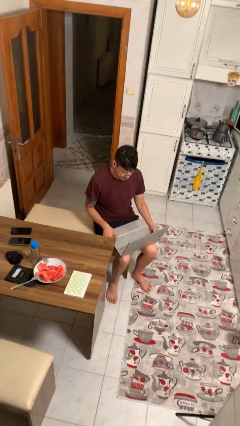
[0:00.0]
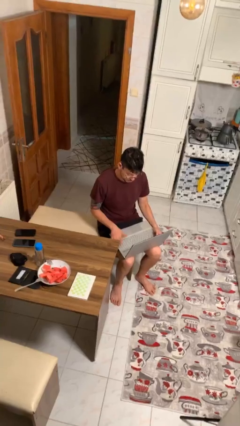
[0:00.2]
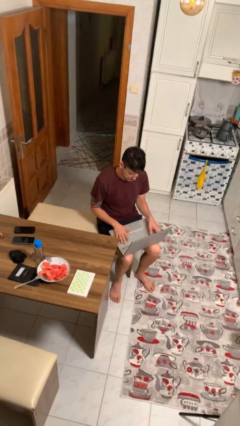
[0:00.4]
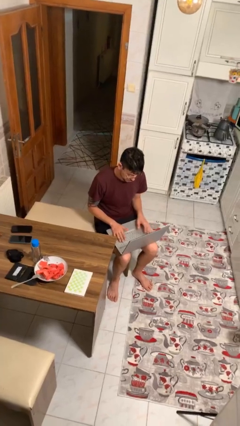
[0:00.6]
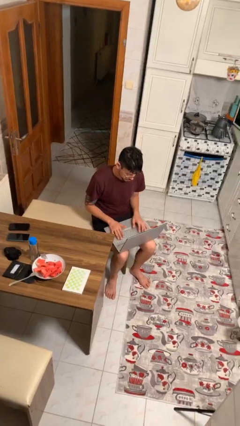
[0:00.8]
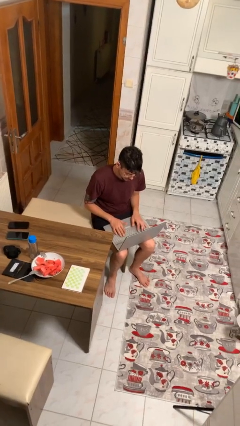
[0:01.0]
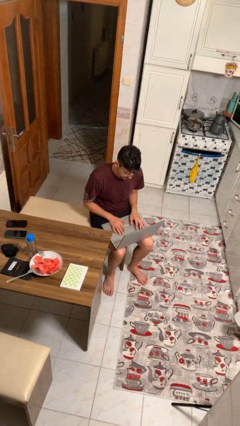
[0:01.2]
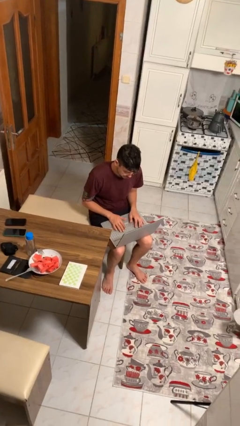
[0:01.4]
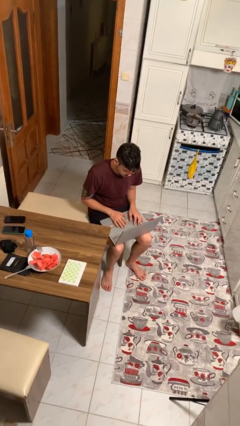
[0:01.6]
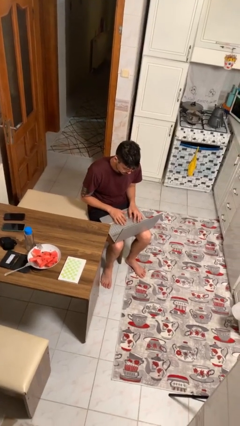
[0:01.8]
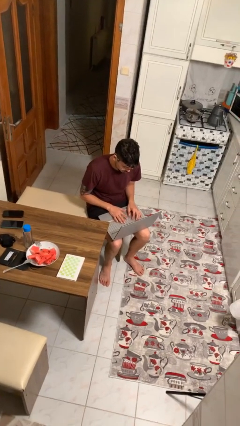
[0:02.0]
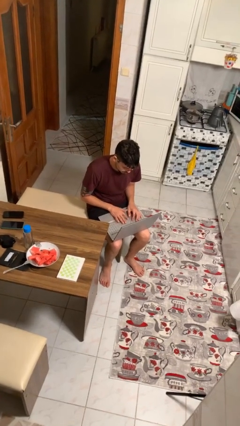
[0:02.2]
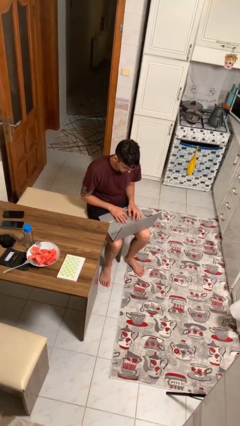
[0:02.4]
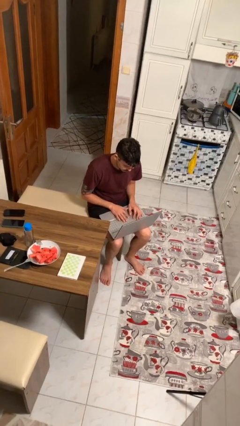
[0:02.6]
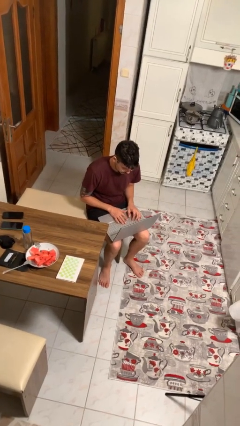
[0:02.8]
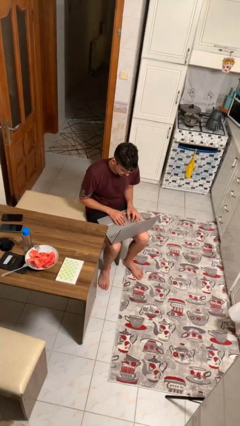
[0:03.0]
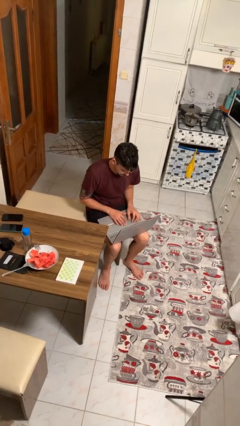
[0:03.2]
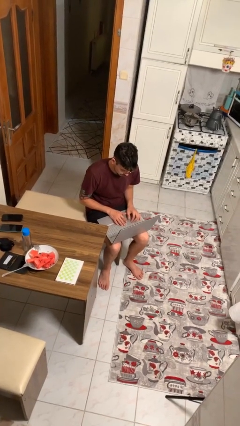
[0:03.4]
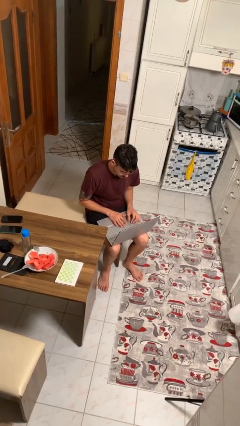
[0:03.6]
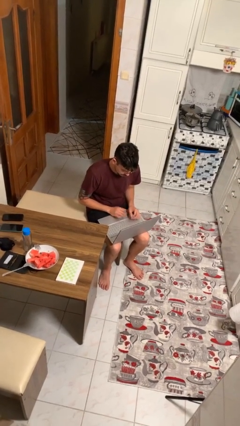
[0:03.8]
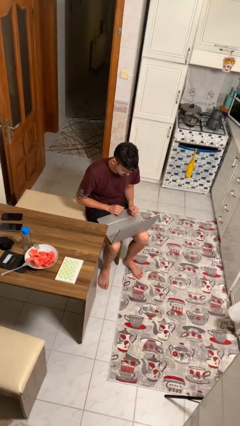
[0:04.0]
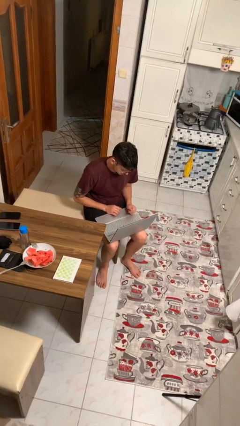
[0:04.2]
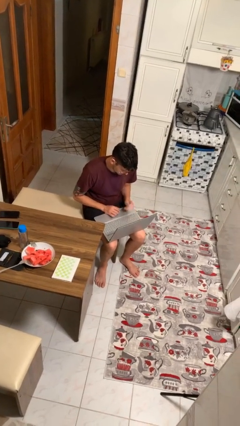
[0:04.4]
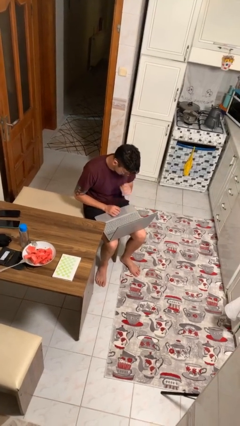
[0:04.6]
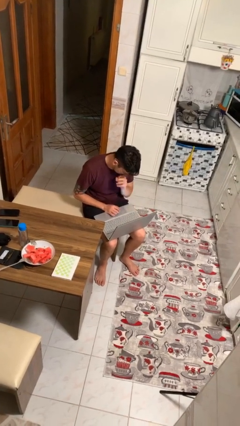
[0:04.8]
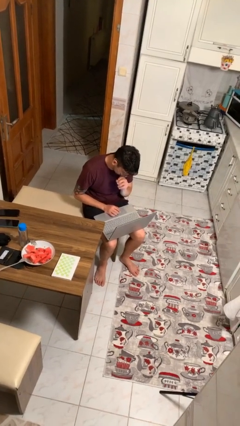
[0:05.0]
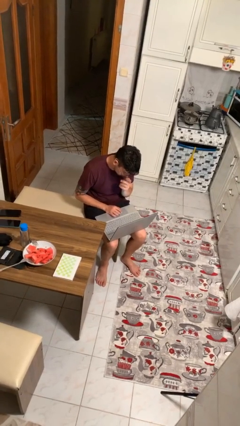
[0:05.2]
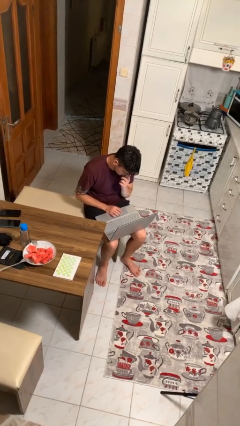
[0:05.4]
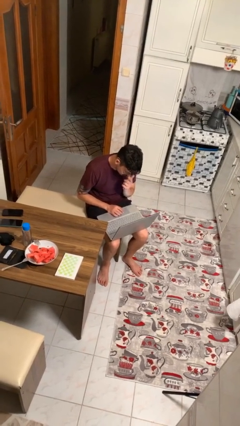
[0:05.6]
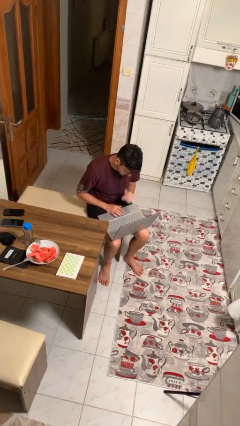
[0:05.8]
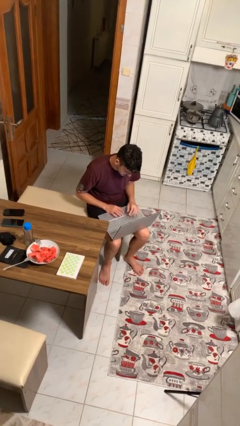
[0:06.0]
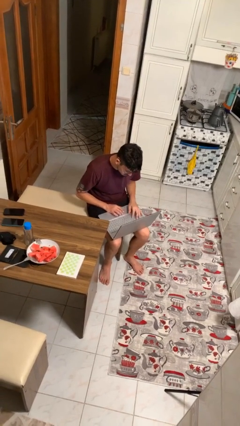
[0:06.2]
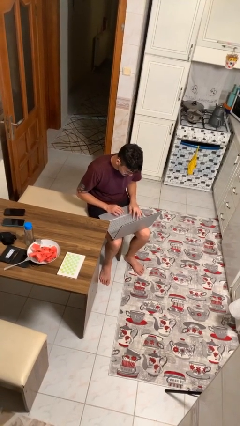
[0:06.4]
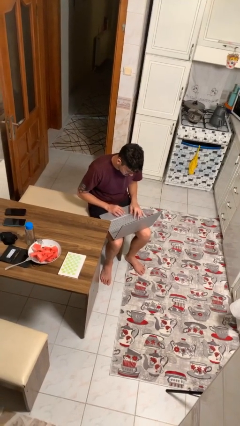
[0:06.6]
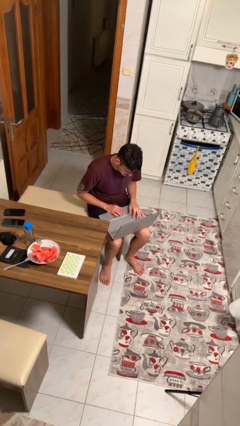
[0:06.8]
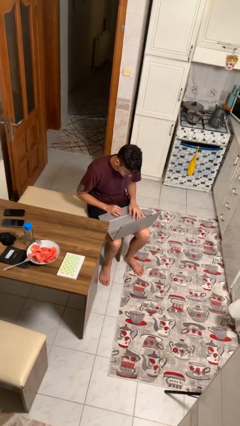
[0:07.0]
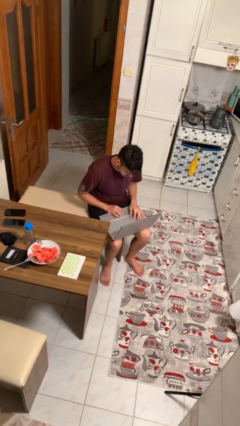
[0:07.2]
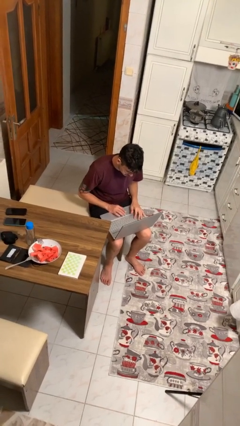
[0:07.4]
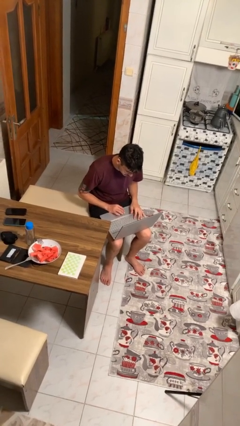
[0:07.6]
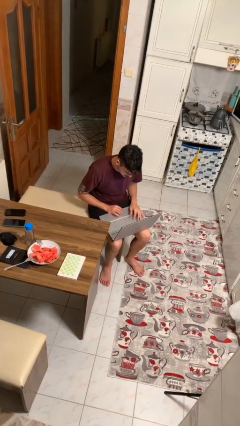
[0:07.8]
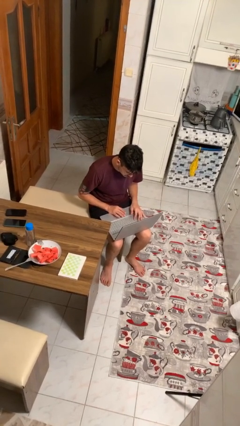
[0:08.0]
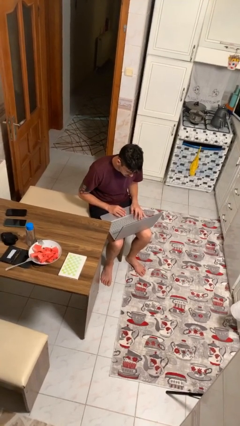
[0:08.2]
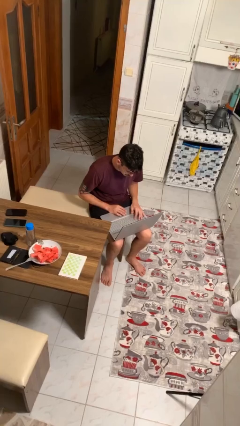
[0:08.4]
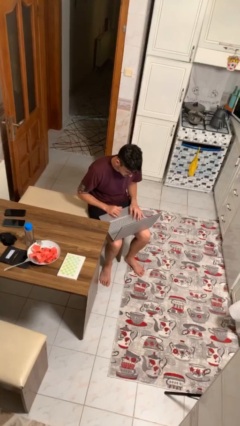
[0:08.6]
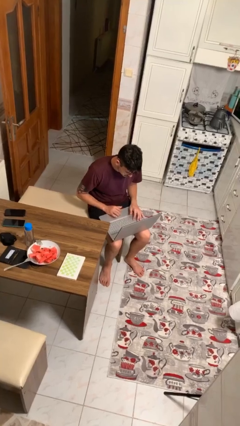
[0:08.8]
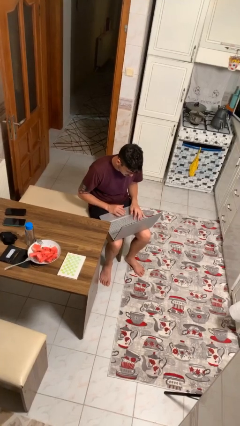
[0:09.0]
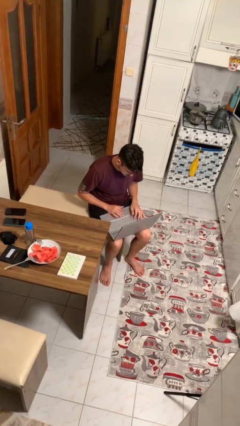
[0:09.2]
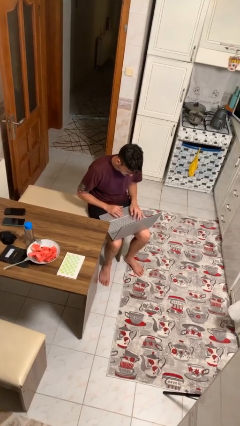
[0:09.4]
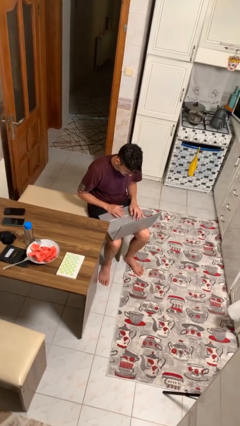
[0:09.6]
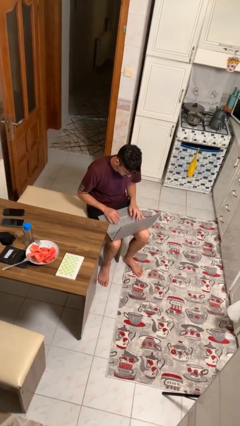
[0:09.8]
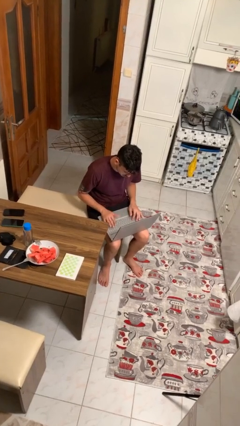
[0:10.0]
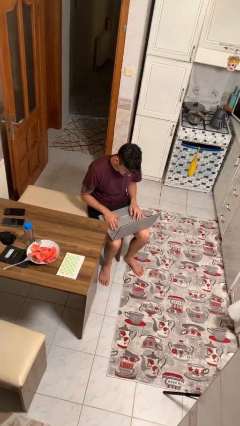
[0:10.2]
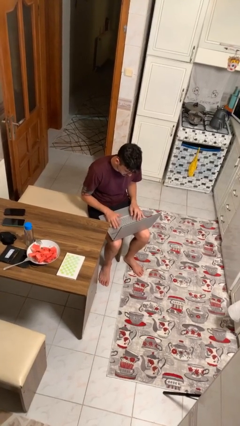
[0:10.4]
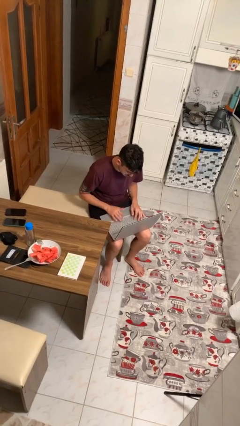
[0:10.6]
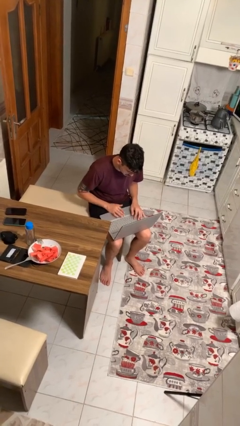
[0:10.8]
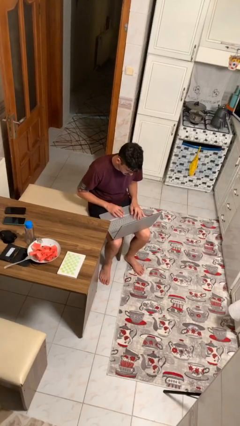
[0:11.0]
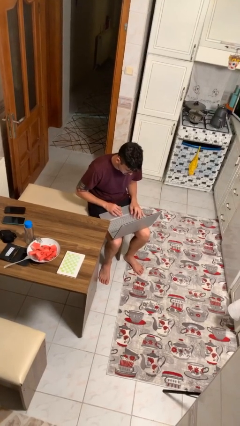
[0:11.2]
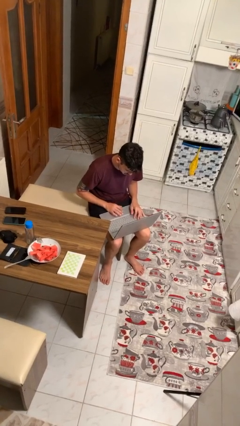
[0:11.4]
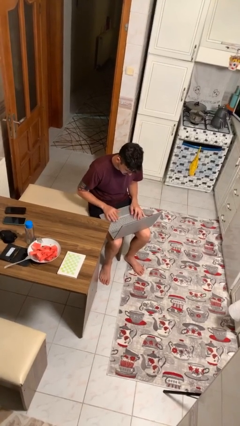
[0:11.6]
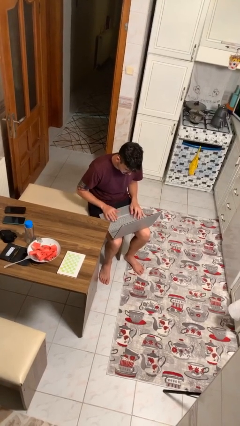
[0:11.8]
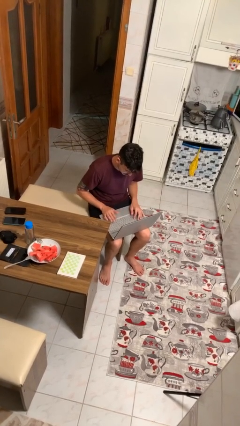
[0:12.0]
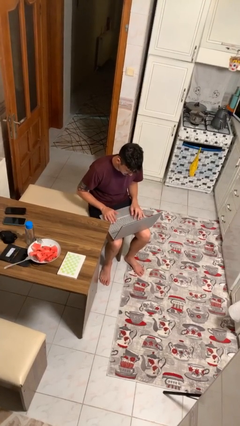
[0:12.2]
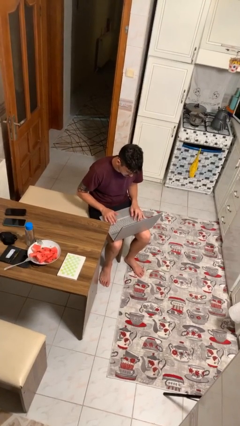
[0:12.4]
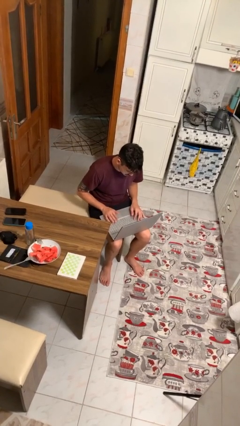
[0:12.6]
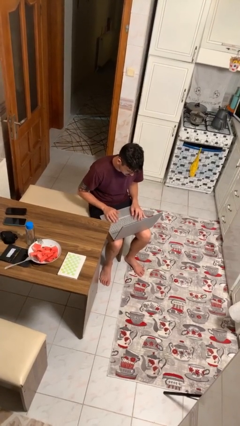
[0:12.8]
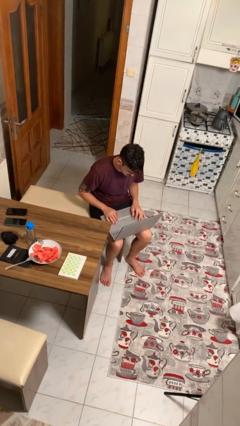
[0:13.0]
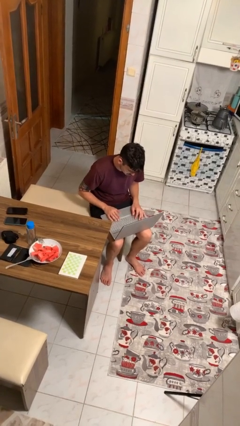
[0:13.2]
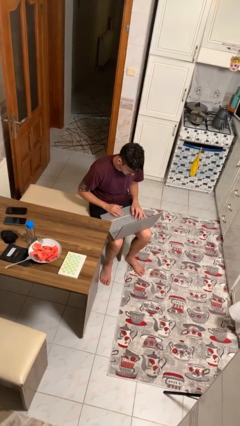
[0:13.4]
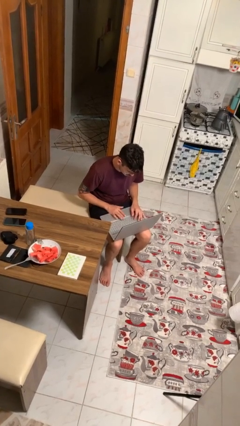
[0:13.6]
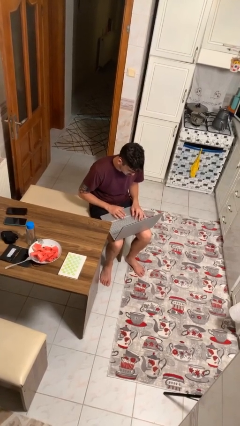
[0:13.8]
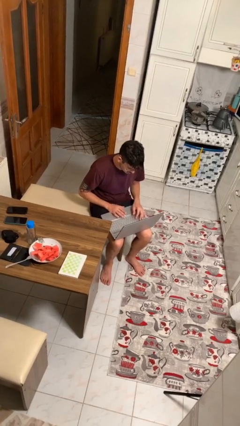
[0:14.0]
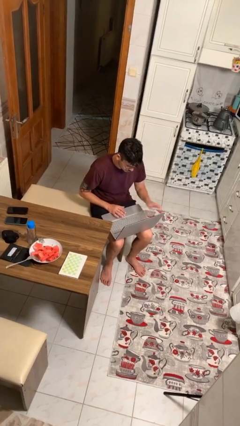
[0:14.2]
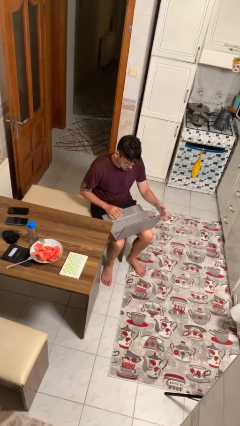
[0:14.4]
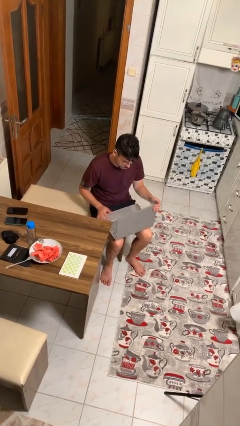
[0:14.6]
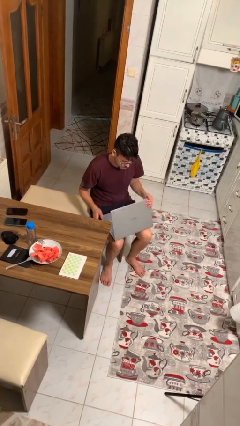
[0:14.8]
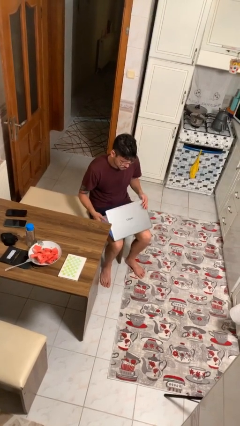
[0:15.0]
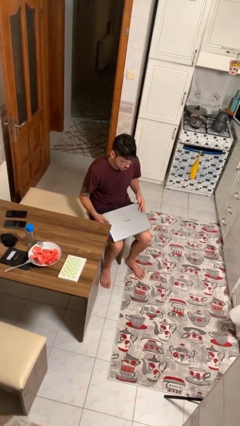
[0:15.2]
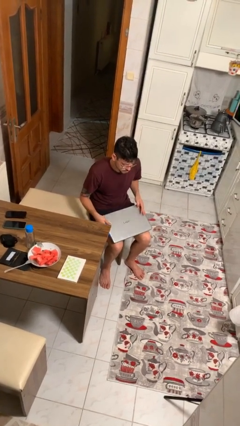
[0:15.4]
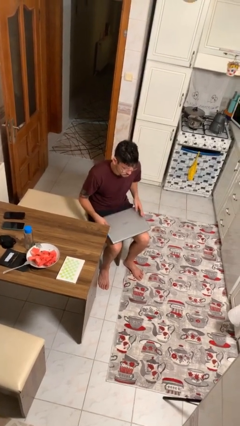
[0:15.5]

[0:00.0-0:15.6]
person interacts with laptop

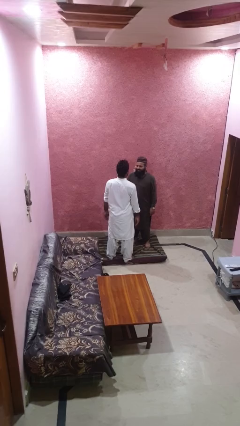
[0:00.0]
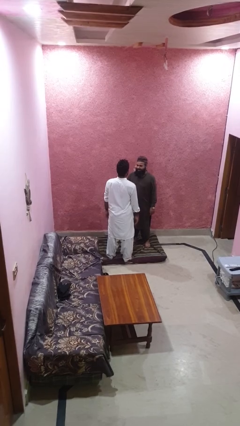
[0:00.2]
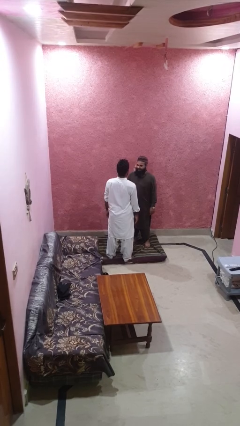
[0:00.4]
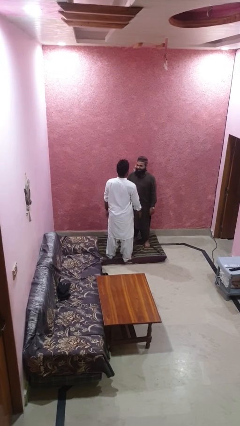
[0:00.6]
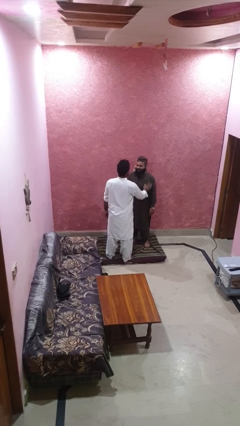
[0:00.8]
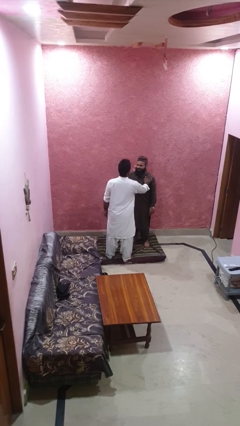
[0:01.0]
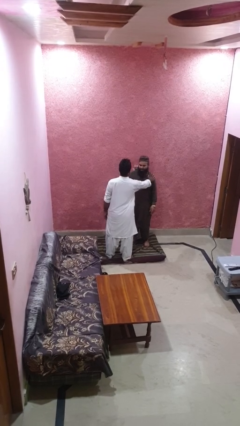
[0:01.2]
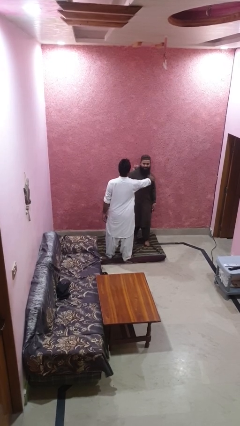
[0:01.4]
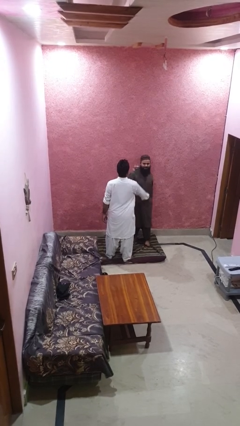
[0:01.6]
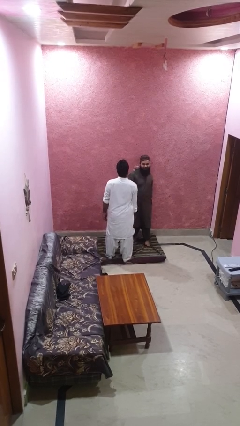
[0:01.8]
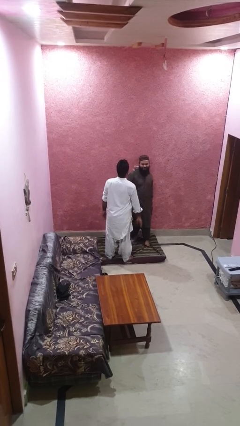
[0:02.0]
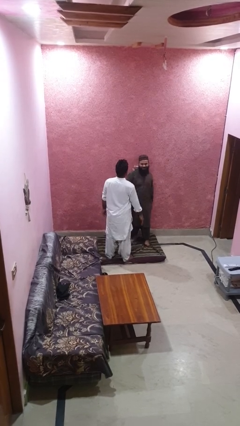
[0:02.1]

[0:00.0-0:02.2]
person shoves person

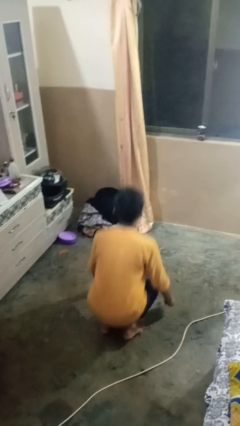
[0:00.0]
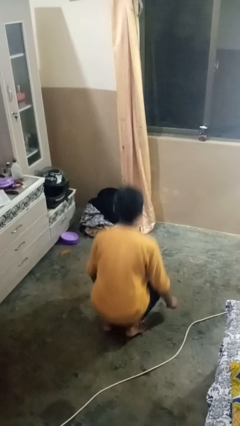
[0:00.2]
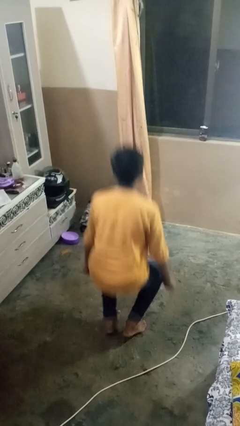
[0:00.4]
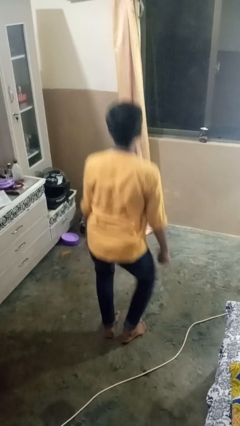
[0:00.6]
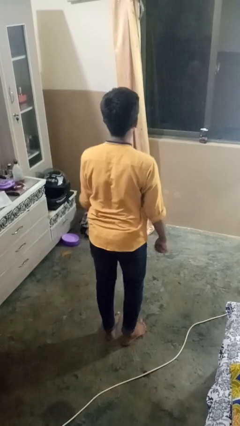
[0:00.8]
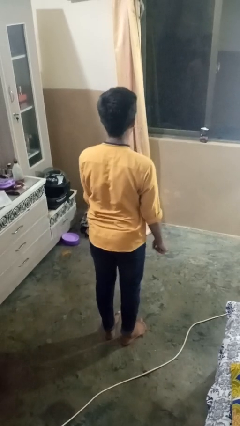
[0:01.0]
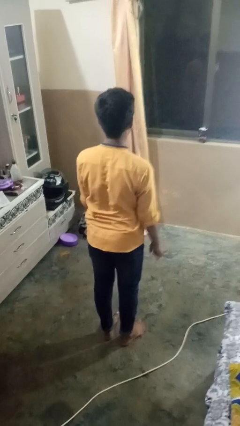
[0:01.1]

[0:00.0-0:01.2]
person exercises with situp
